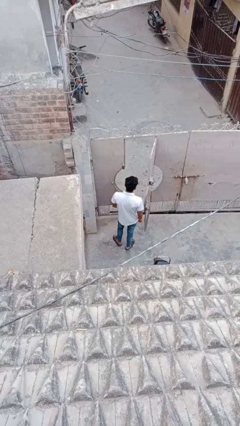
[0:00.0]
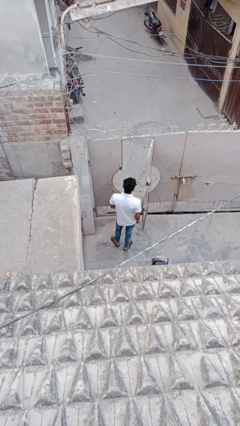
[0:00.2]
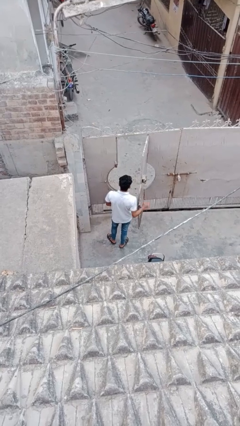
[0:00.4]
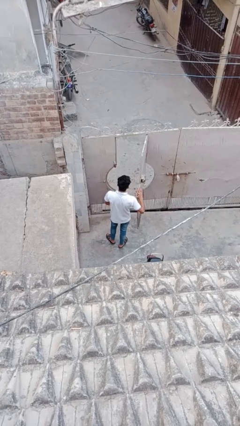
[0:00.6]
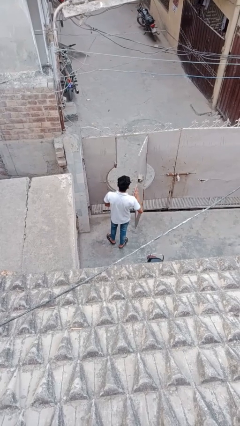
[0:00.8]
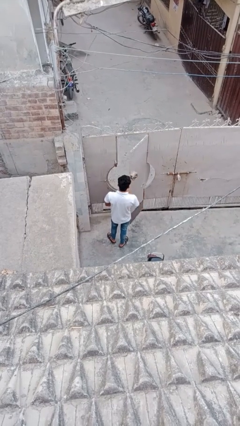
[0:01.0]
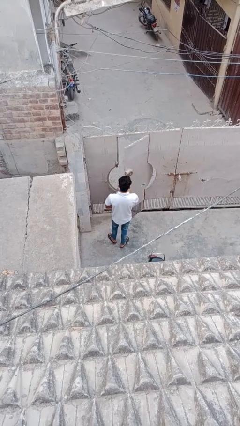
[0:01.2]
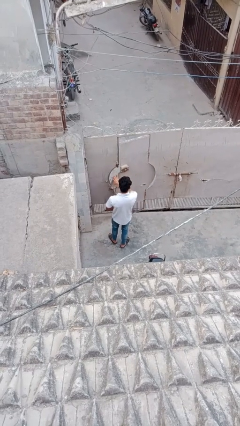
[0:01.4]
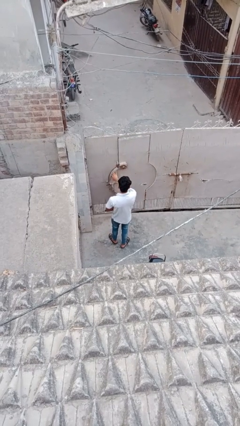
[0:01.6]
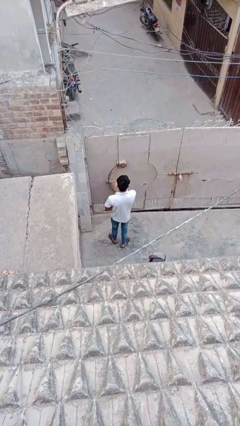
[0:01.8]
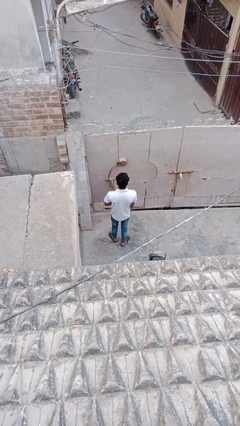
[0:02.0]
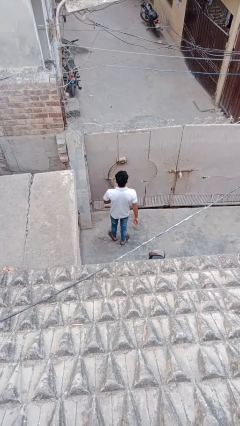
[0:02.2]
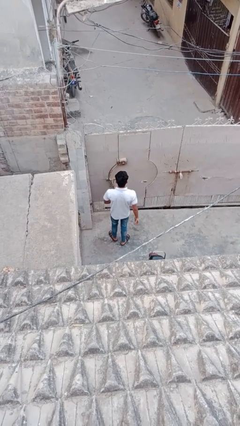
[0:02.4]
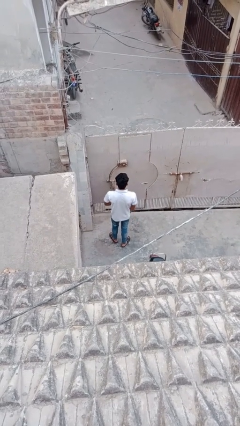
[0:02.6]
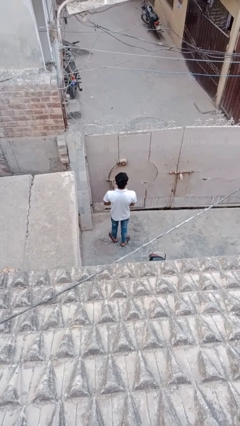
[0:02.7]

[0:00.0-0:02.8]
person closes facility door

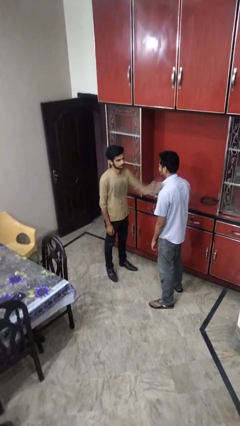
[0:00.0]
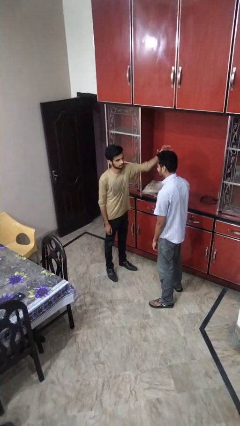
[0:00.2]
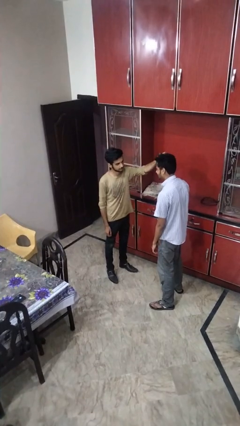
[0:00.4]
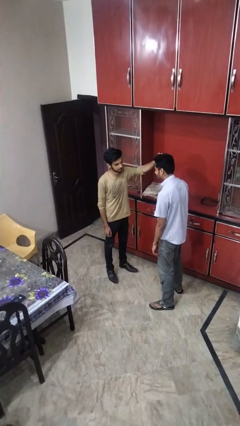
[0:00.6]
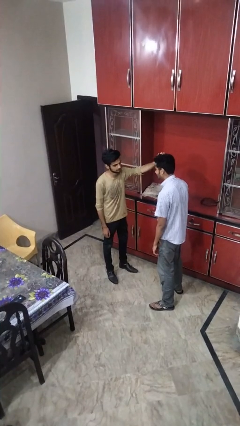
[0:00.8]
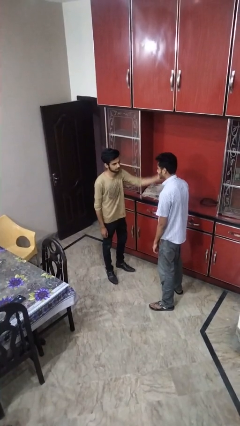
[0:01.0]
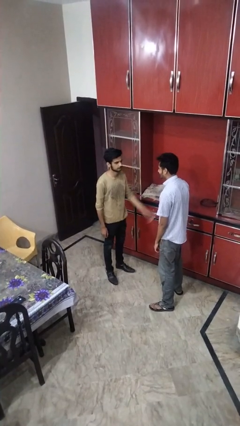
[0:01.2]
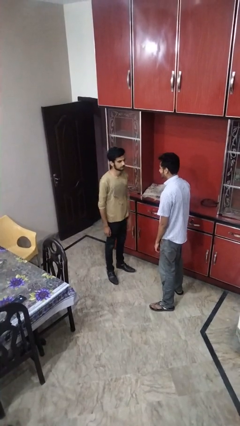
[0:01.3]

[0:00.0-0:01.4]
person grabs person by hair

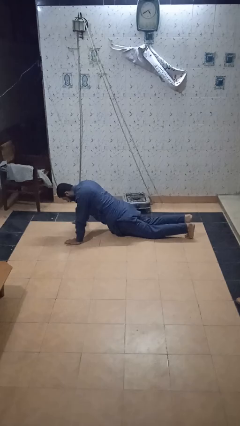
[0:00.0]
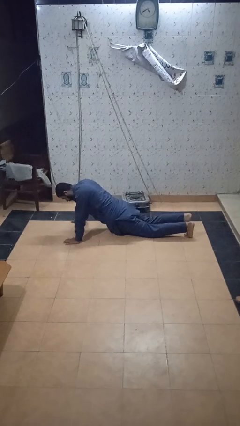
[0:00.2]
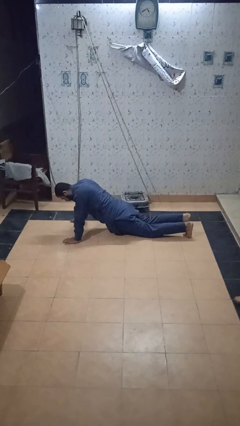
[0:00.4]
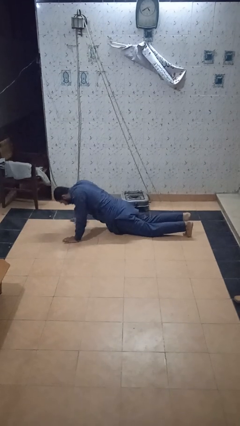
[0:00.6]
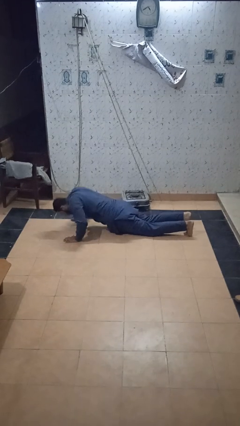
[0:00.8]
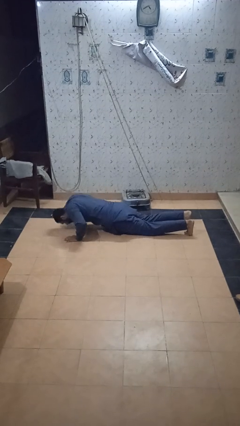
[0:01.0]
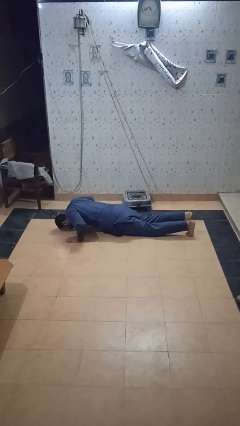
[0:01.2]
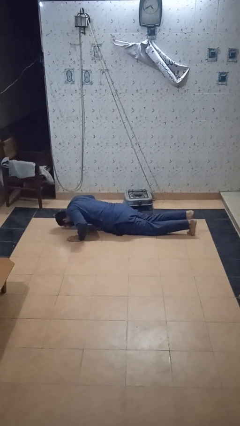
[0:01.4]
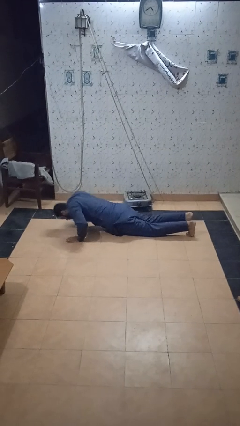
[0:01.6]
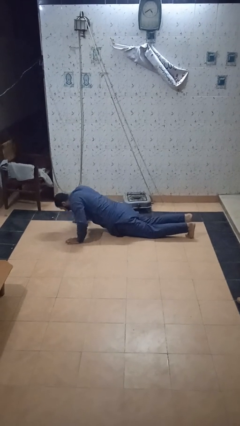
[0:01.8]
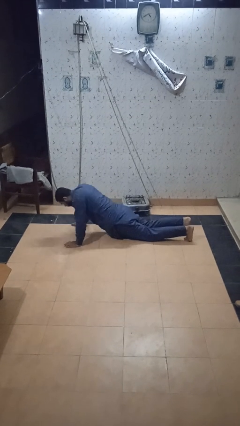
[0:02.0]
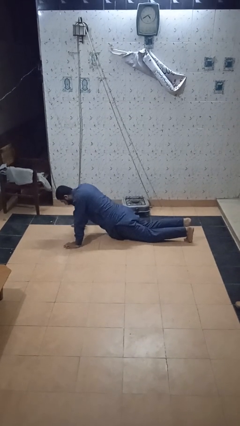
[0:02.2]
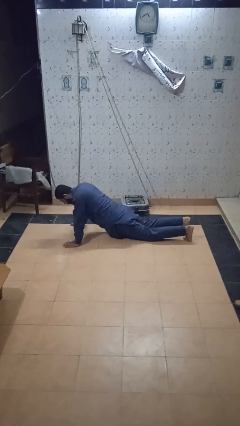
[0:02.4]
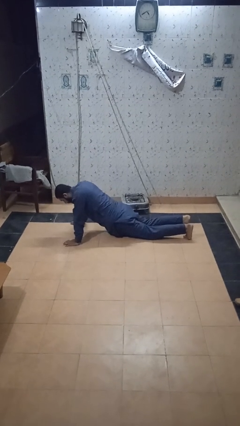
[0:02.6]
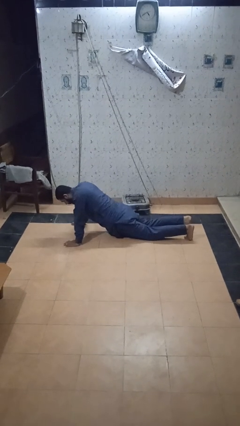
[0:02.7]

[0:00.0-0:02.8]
person exercises with pushup

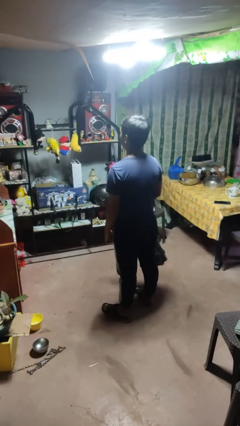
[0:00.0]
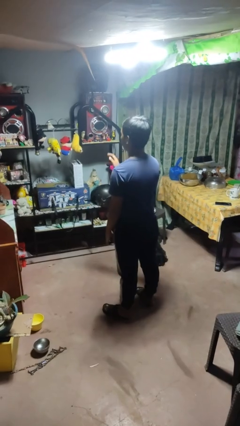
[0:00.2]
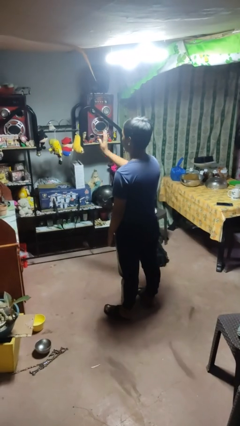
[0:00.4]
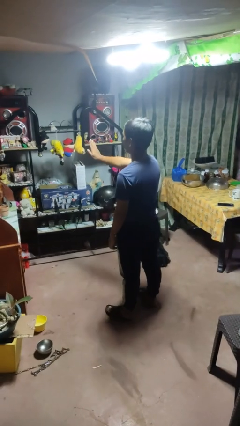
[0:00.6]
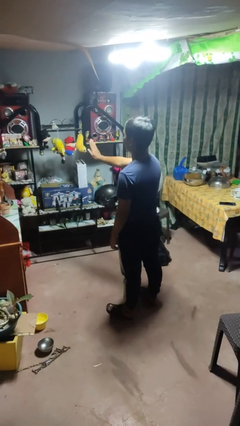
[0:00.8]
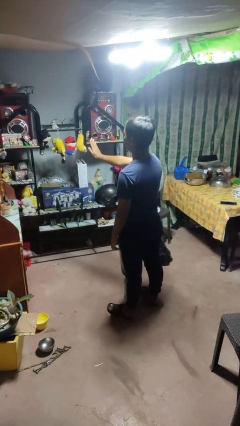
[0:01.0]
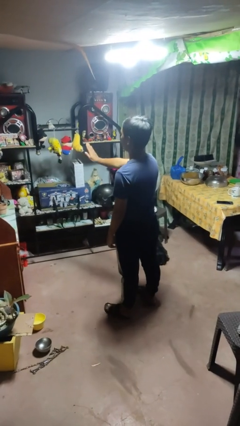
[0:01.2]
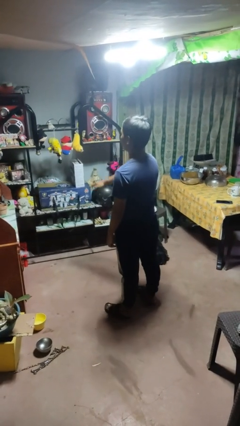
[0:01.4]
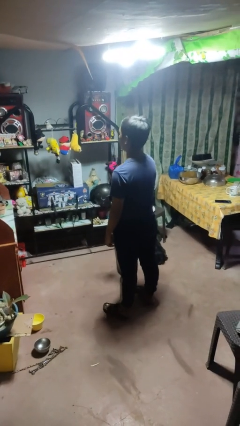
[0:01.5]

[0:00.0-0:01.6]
person gestures stop

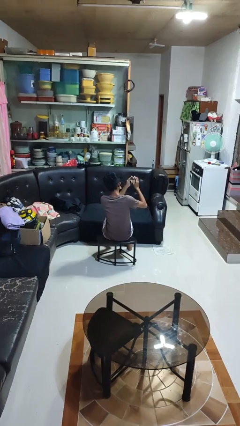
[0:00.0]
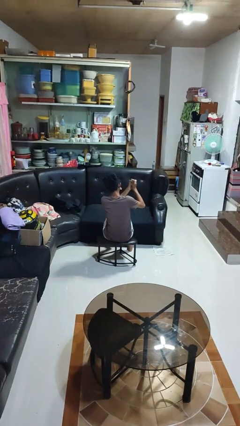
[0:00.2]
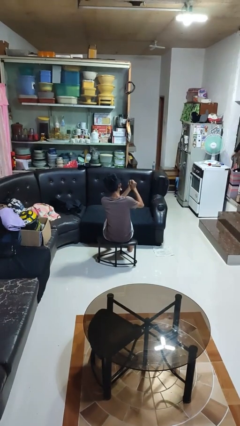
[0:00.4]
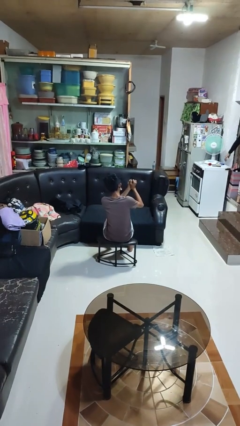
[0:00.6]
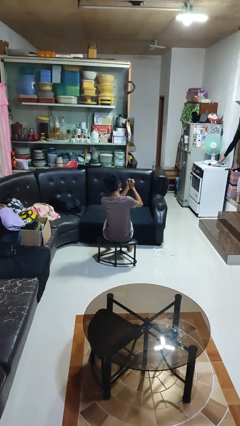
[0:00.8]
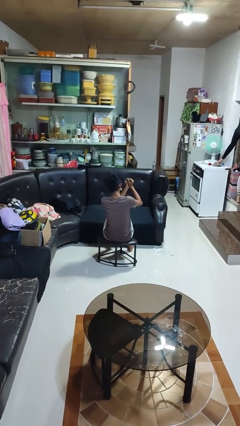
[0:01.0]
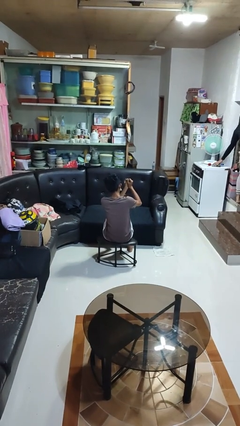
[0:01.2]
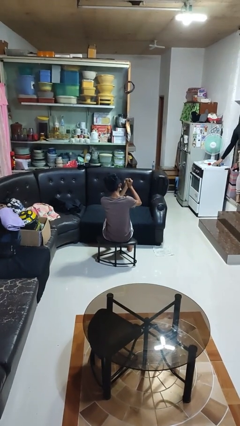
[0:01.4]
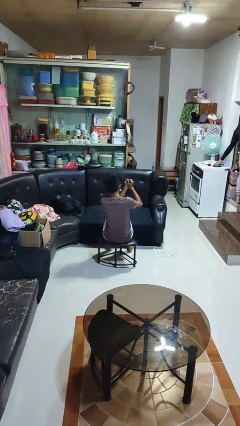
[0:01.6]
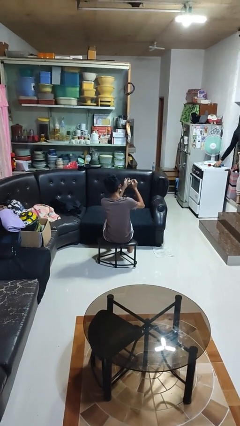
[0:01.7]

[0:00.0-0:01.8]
person crumples paper

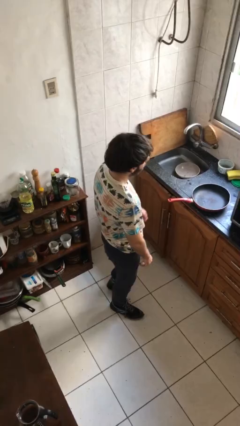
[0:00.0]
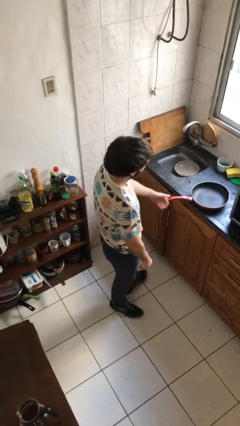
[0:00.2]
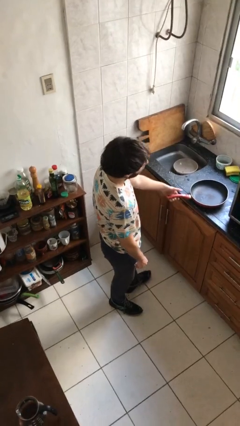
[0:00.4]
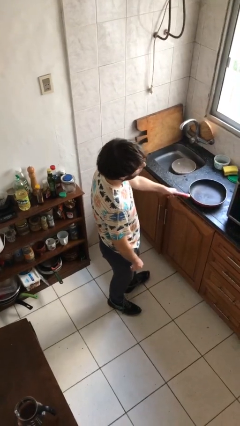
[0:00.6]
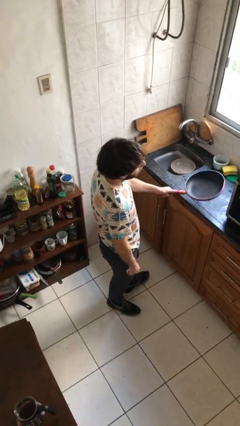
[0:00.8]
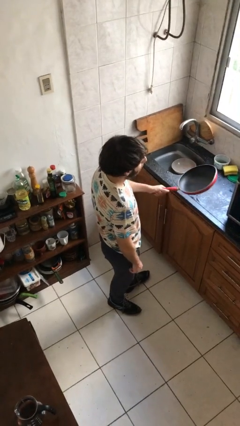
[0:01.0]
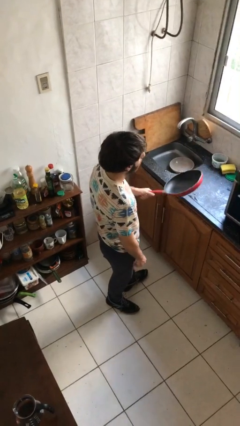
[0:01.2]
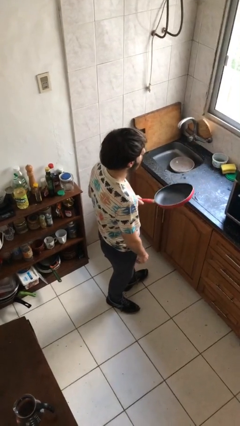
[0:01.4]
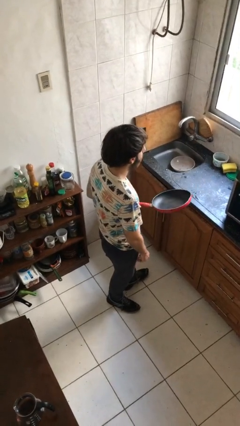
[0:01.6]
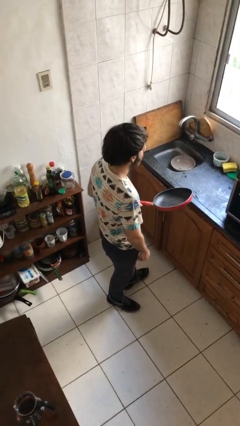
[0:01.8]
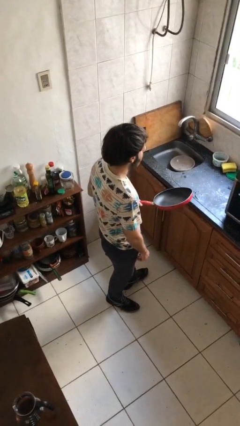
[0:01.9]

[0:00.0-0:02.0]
person picks up object from countertop

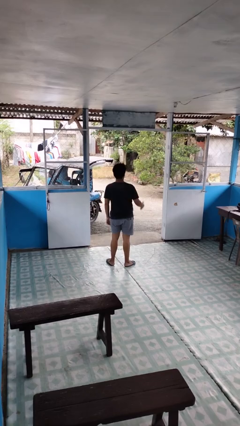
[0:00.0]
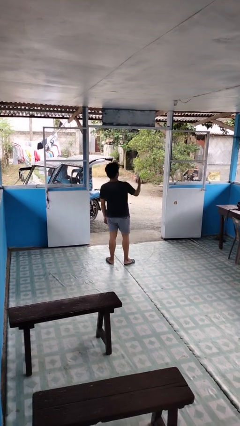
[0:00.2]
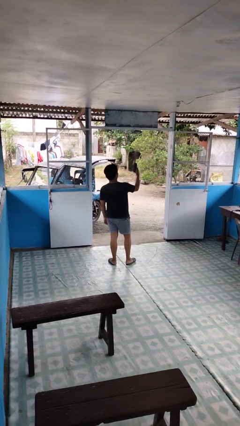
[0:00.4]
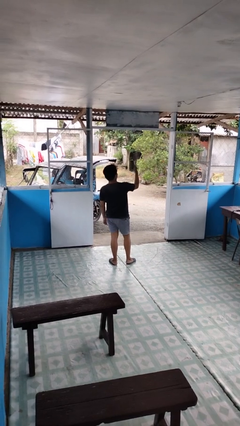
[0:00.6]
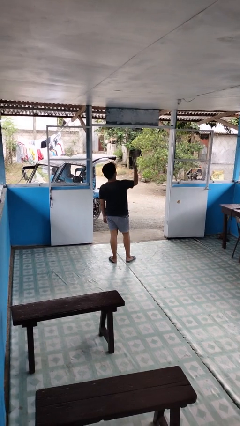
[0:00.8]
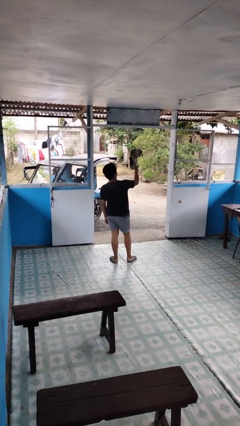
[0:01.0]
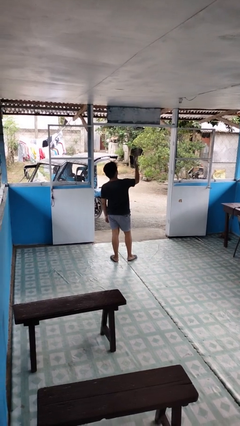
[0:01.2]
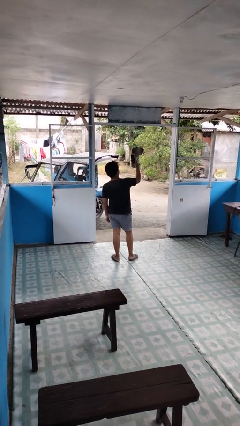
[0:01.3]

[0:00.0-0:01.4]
person takes selfie

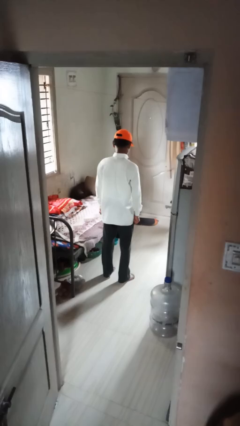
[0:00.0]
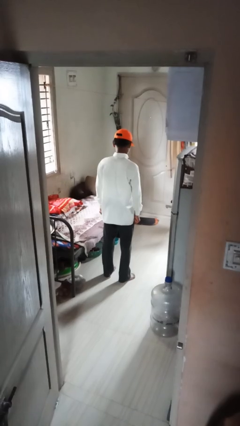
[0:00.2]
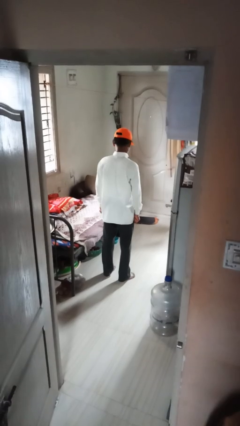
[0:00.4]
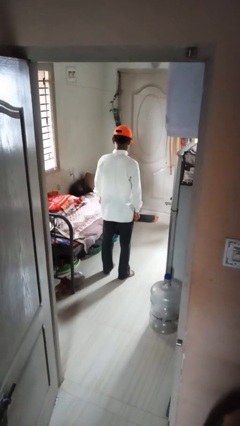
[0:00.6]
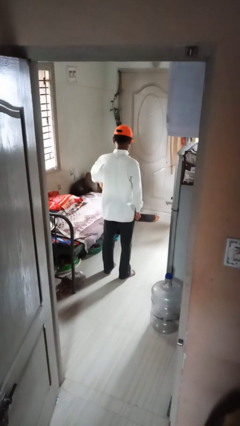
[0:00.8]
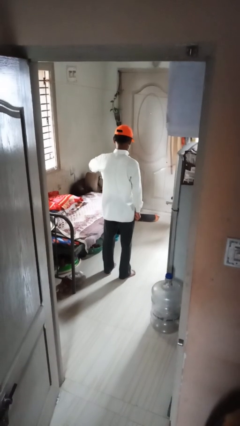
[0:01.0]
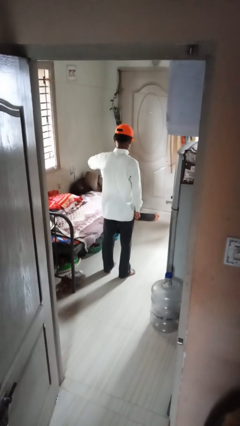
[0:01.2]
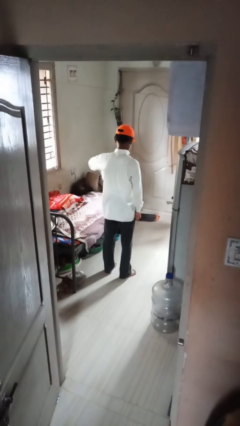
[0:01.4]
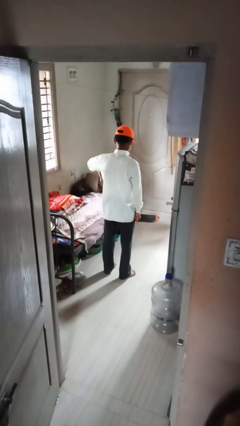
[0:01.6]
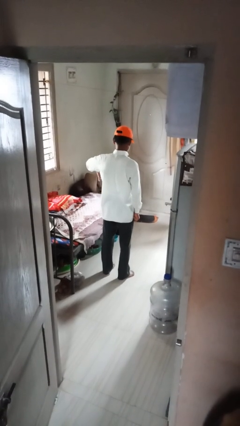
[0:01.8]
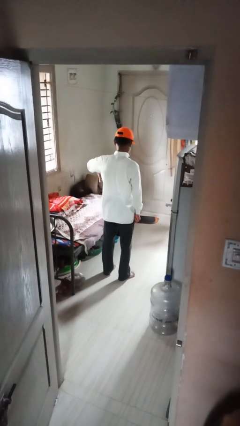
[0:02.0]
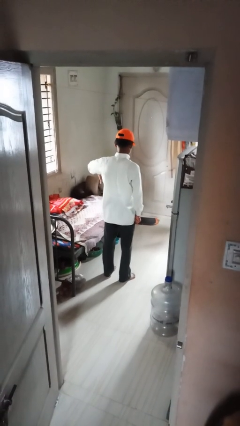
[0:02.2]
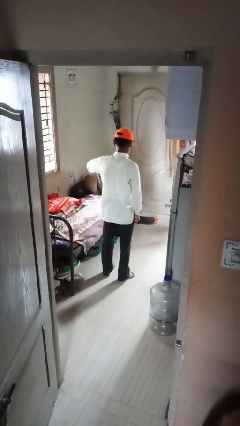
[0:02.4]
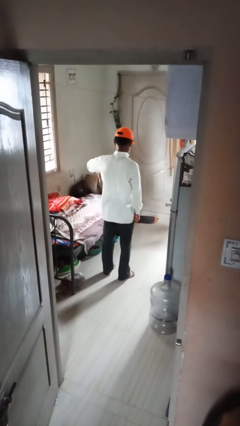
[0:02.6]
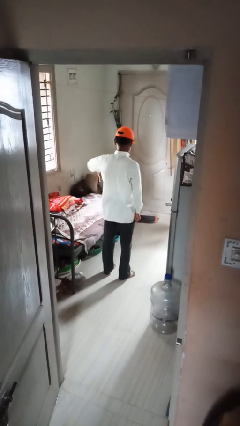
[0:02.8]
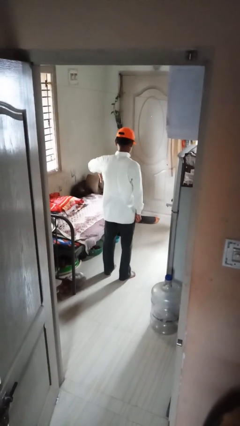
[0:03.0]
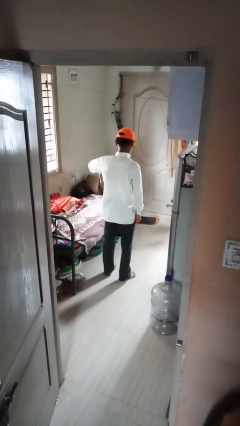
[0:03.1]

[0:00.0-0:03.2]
person gestures thumbs down
